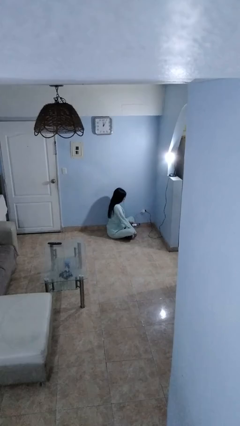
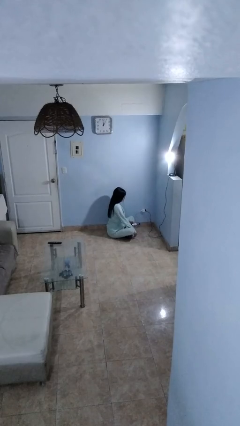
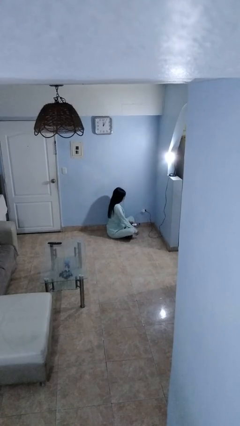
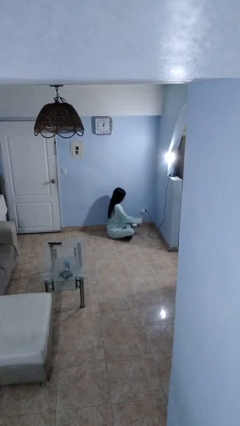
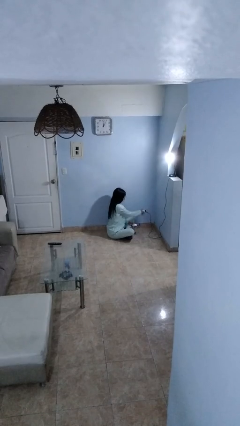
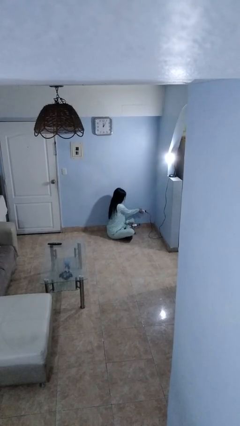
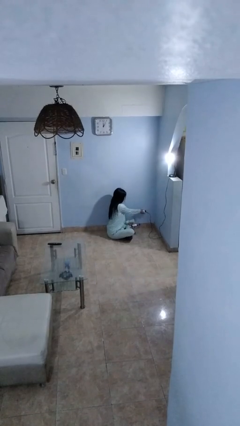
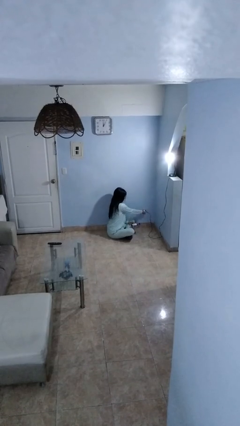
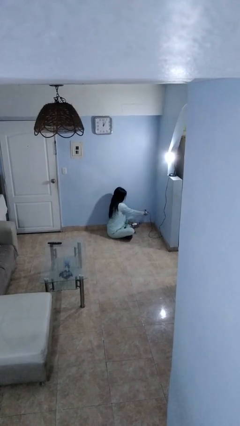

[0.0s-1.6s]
person unplugs from electrical socket

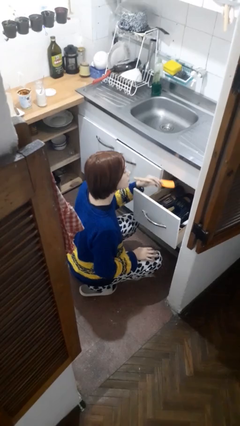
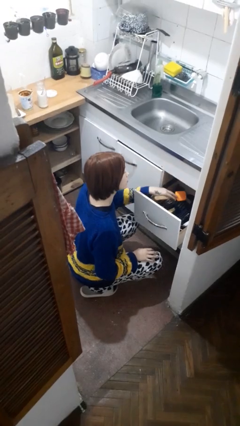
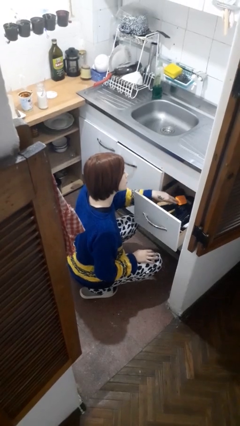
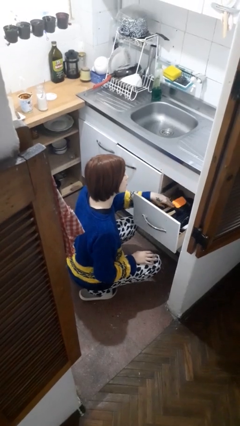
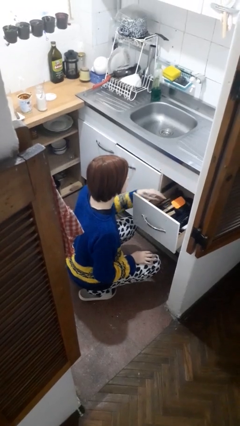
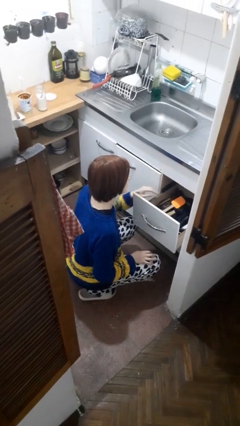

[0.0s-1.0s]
person puts object into kitchen drawer

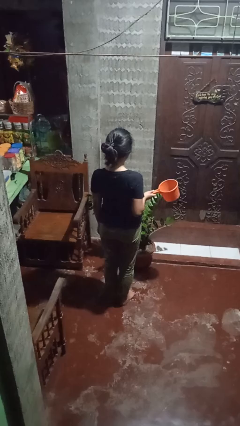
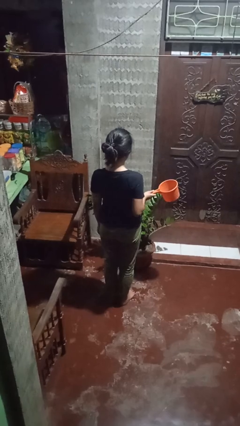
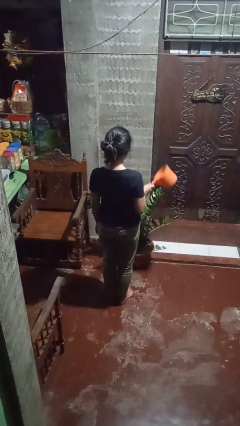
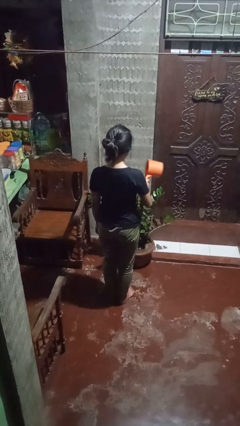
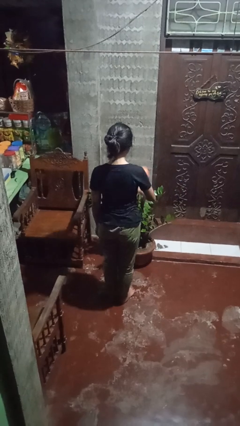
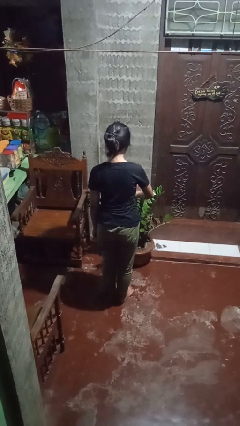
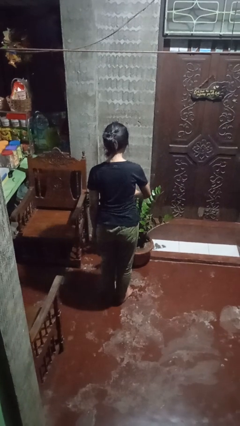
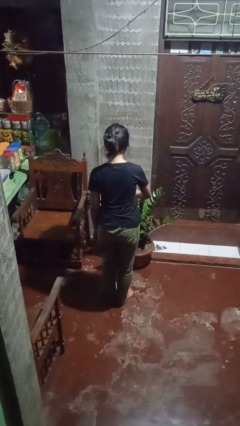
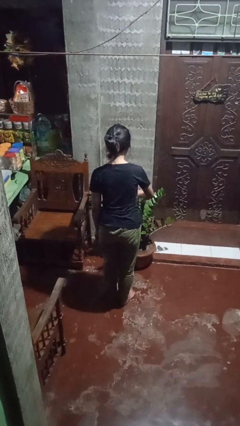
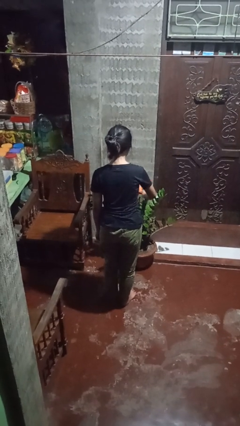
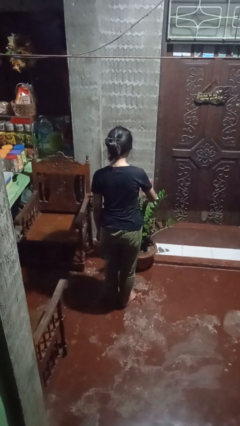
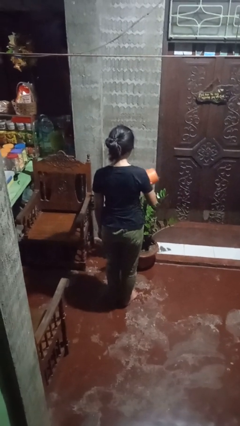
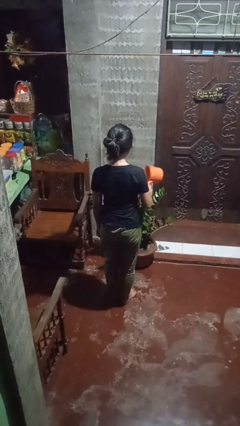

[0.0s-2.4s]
person waters houseplant

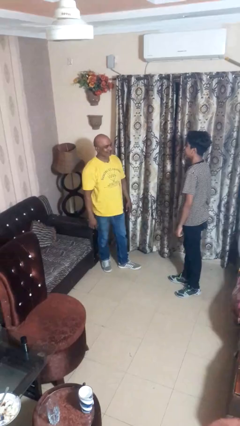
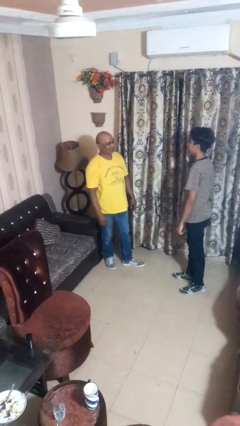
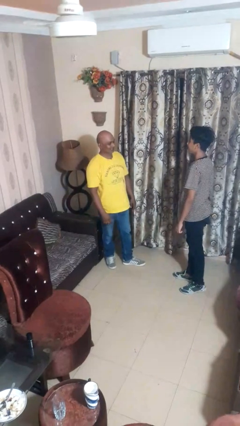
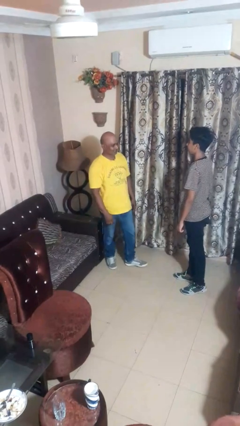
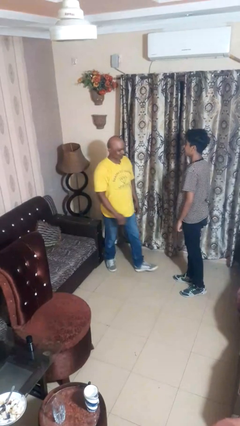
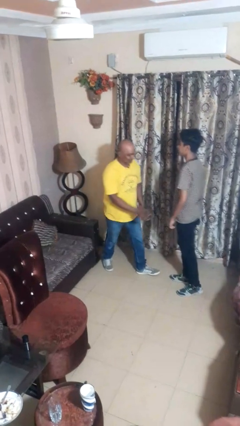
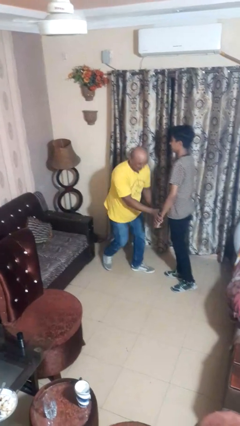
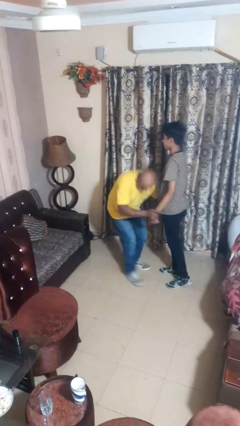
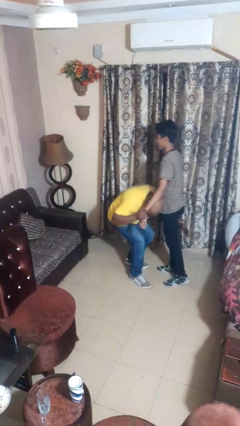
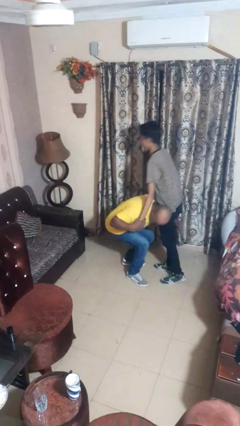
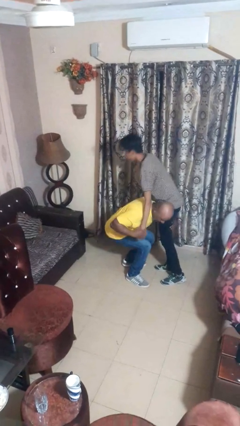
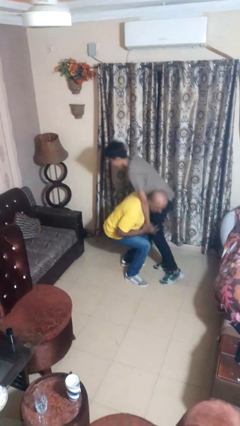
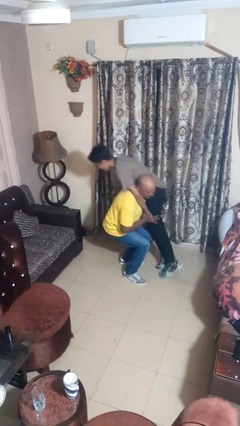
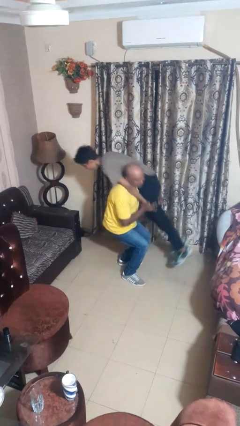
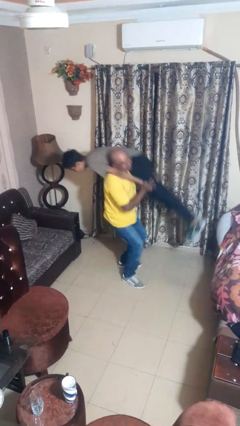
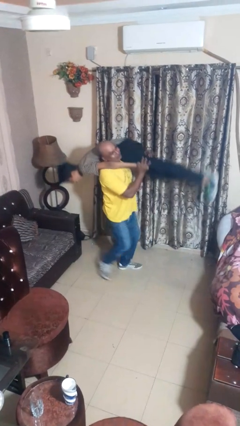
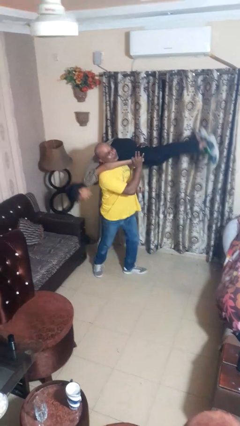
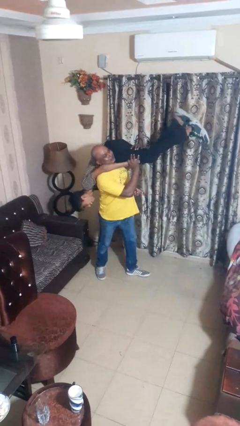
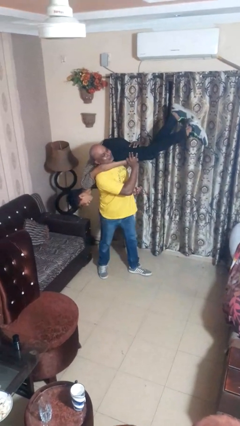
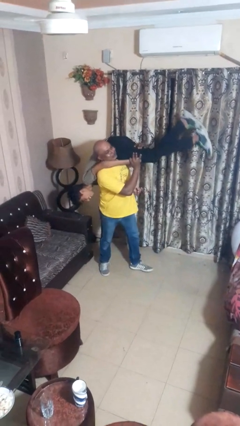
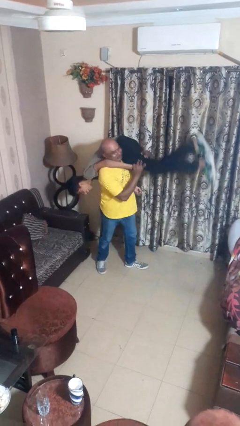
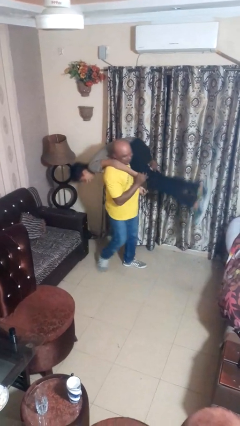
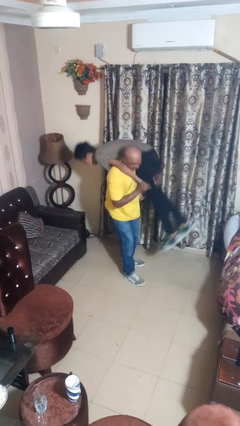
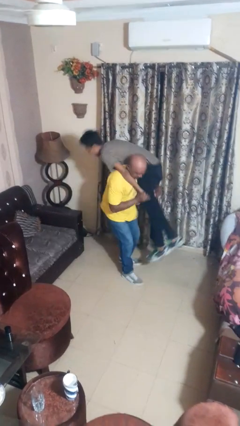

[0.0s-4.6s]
person carries person over shoulder

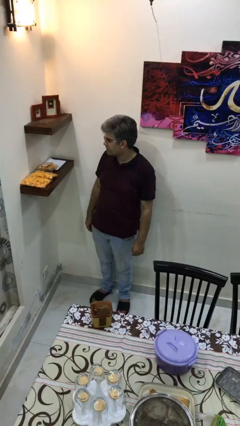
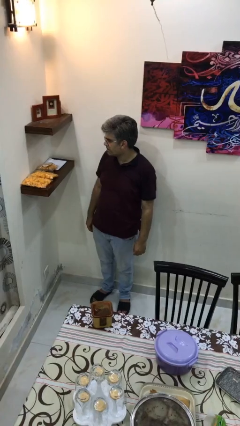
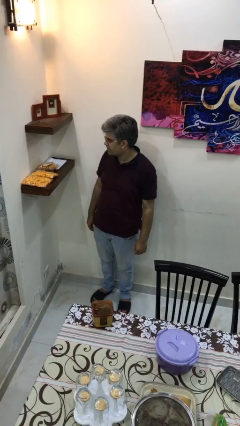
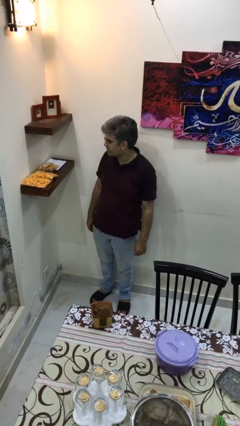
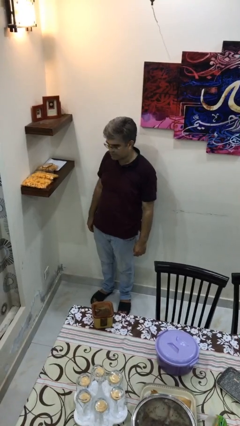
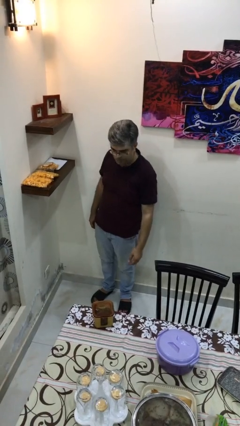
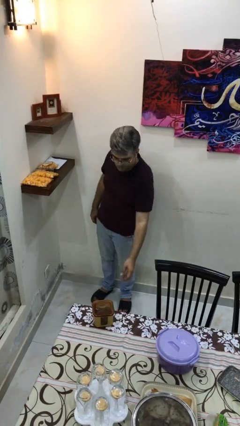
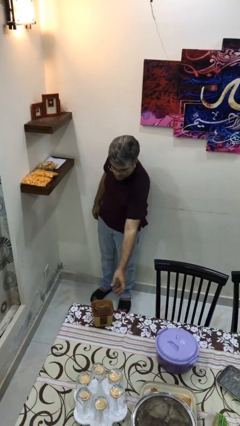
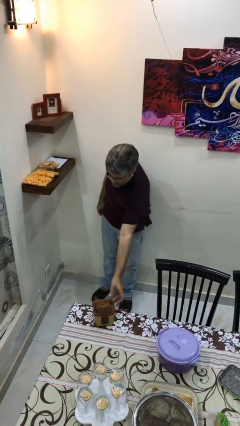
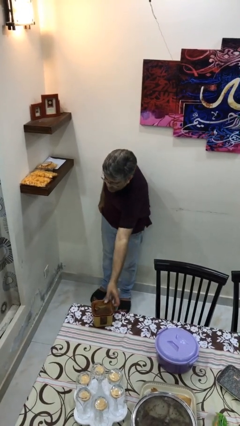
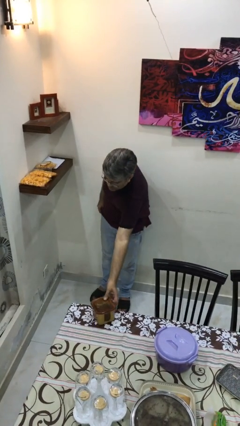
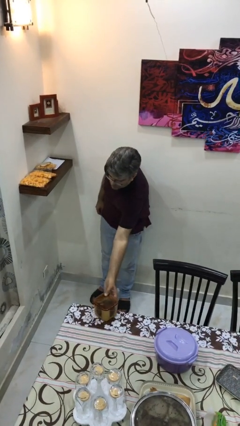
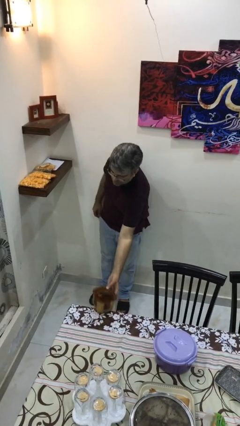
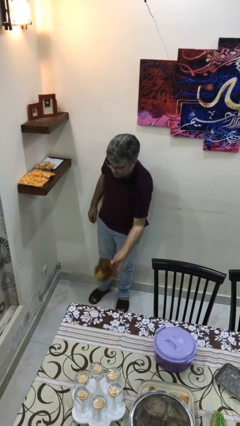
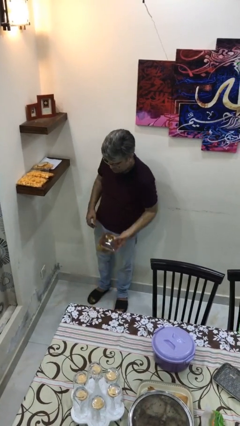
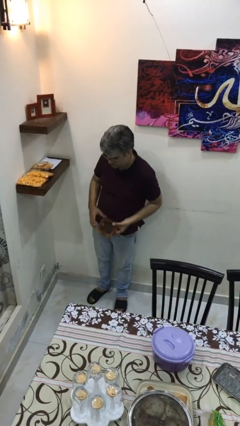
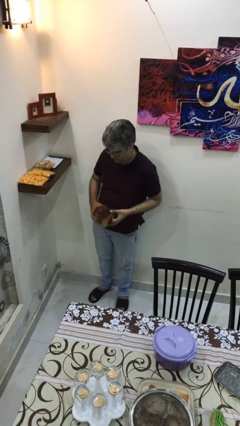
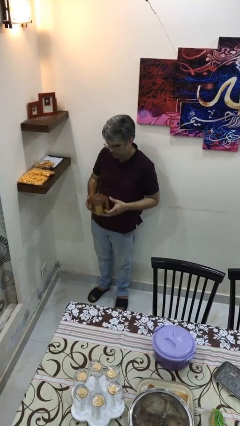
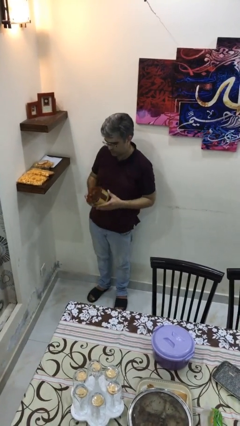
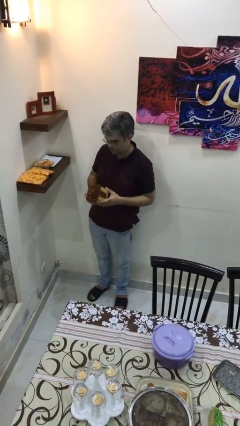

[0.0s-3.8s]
person picks up object from table

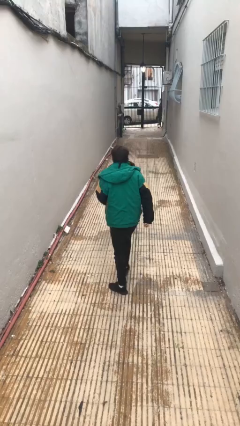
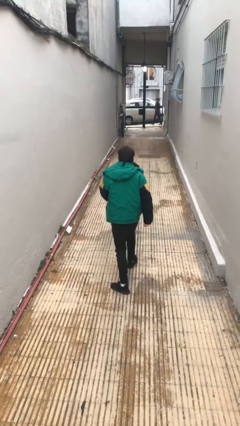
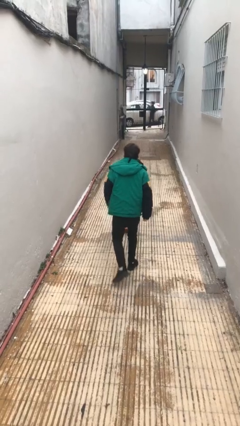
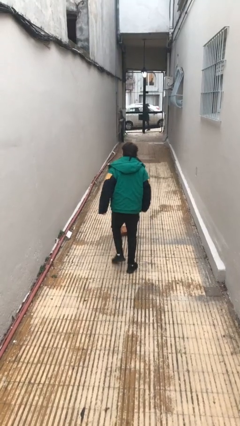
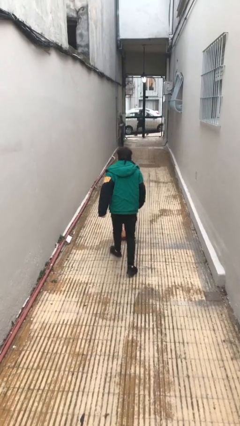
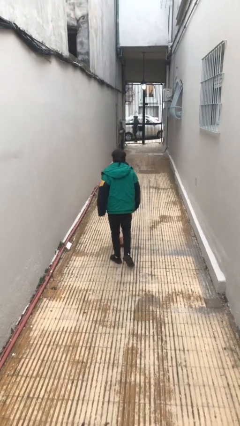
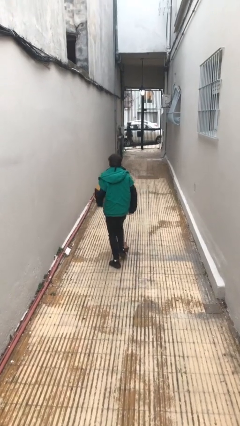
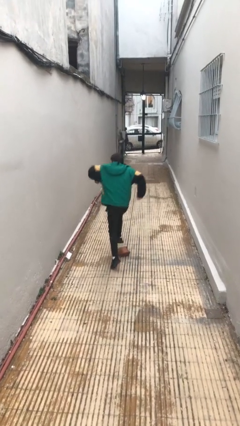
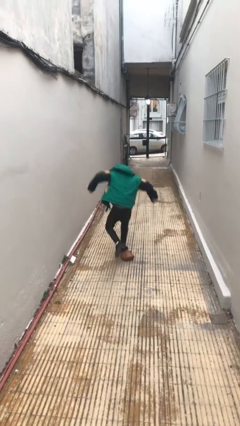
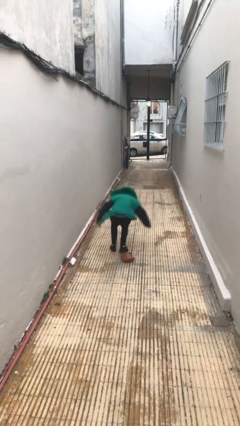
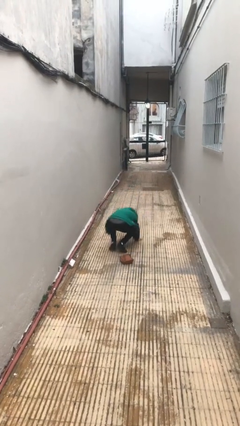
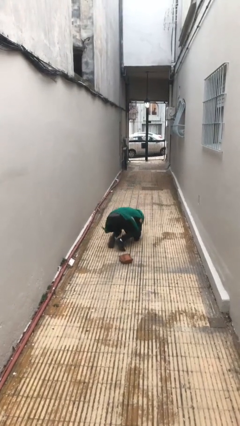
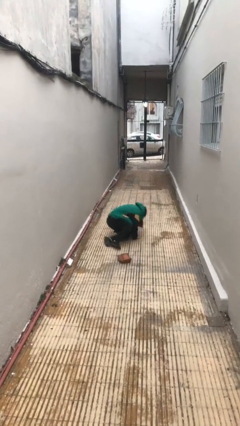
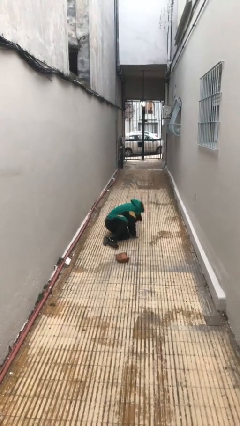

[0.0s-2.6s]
person trips on object on floor

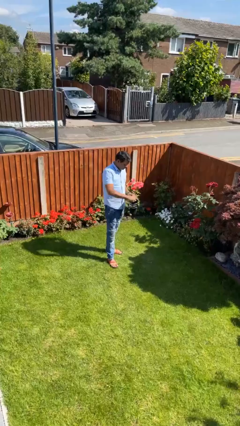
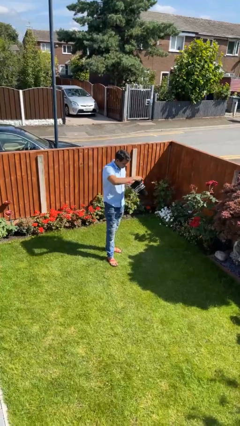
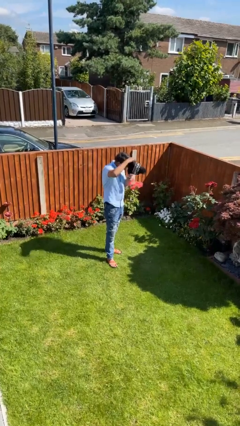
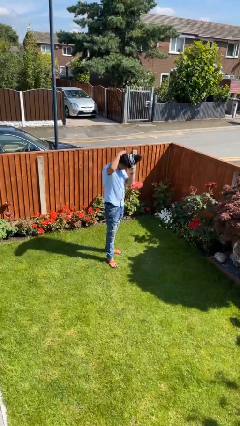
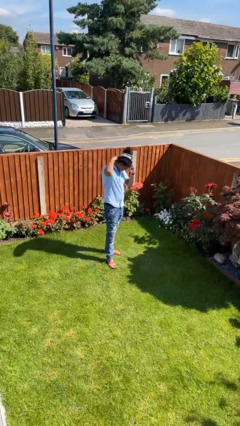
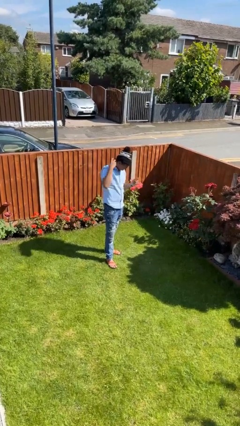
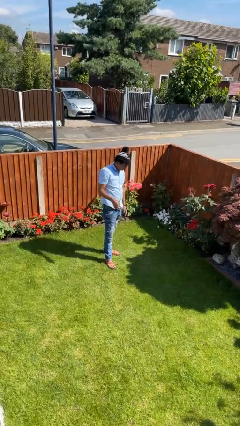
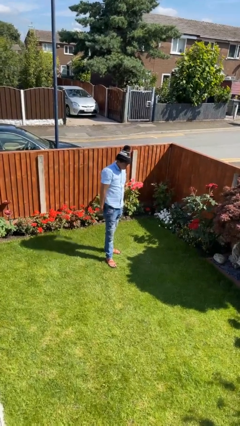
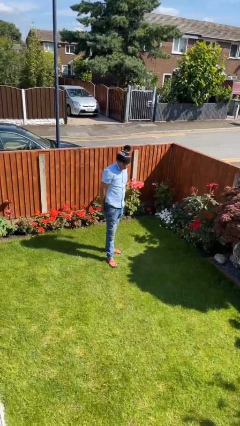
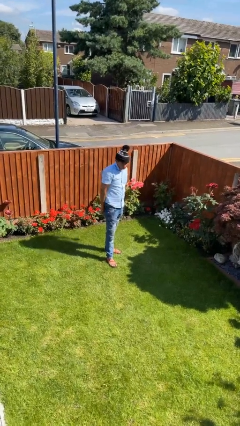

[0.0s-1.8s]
person puts on hat
